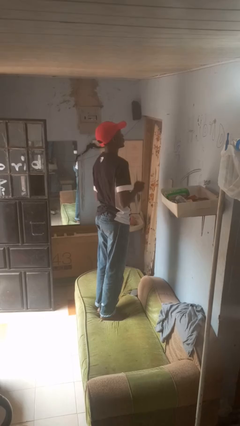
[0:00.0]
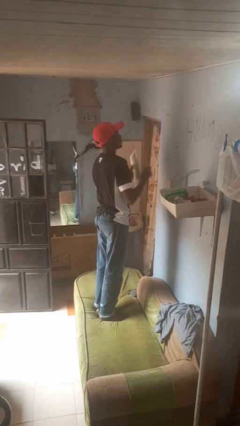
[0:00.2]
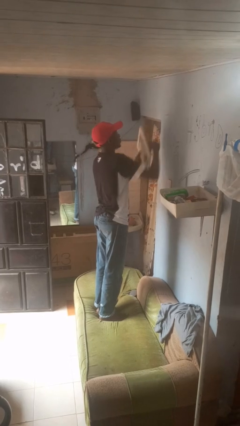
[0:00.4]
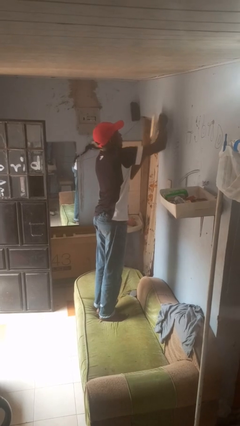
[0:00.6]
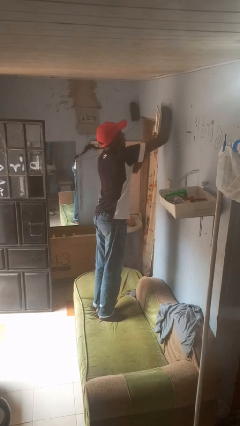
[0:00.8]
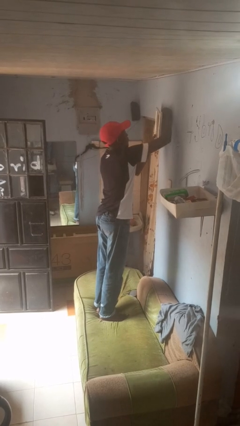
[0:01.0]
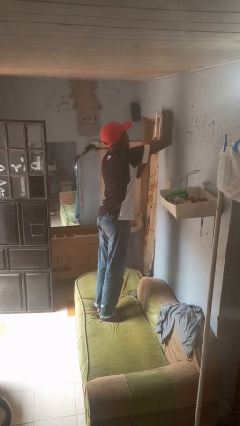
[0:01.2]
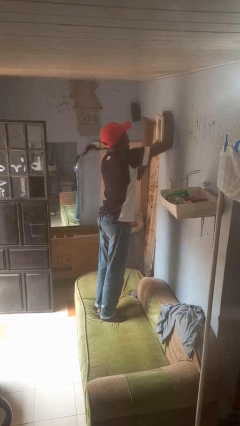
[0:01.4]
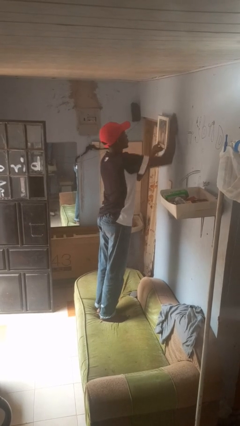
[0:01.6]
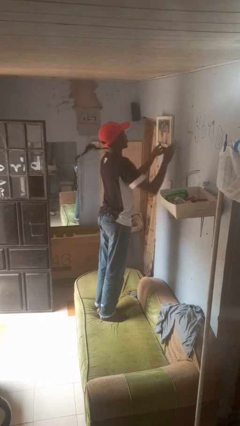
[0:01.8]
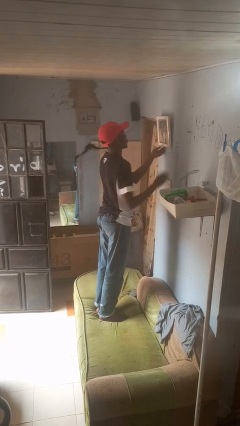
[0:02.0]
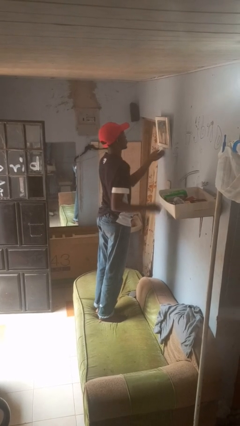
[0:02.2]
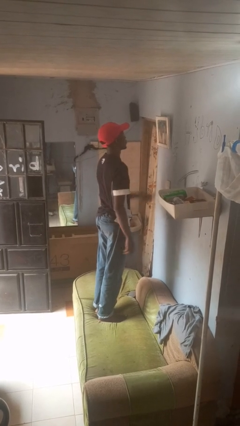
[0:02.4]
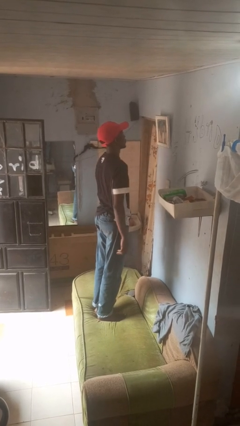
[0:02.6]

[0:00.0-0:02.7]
person puts up picture frame

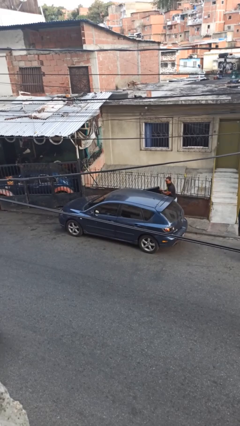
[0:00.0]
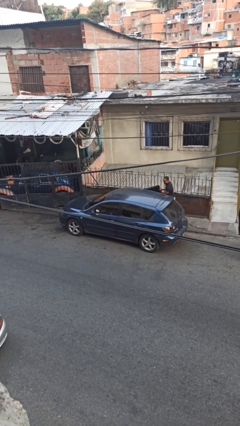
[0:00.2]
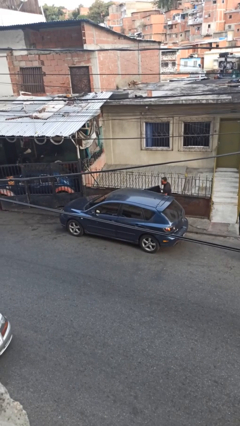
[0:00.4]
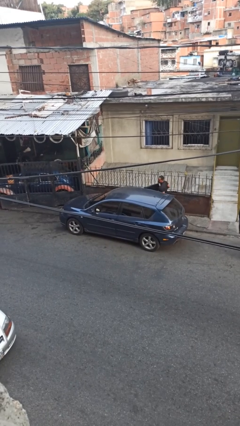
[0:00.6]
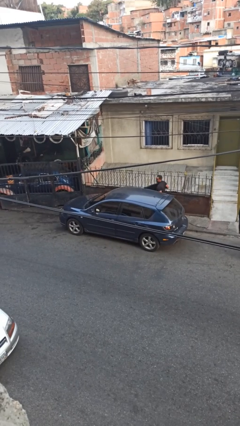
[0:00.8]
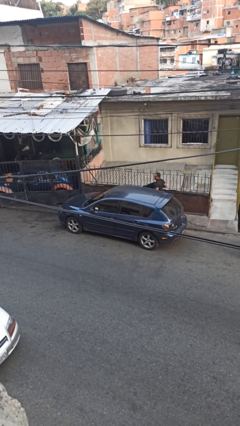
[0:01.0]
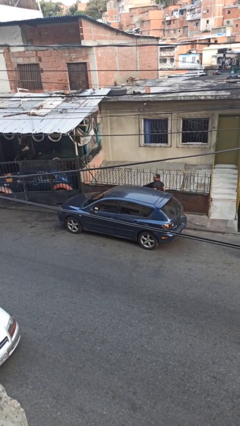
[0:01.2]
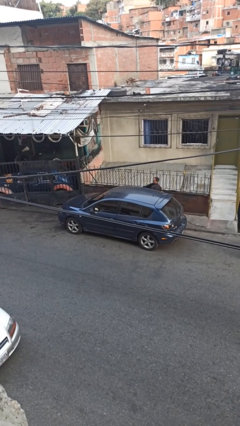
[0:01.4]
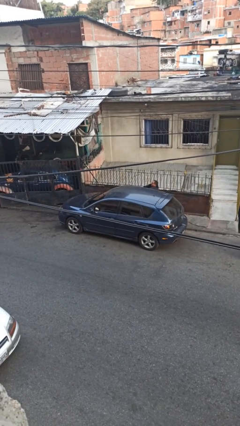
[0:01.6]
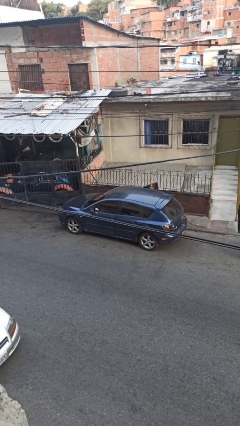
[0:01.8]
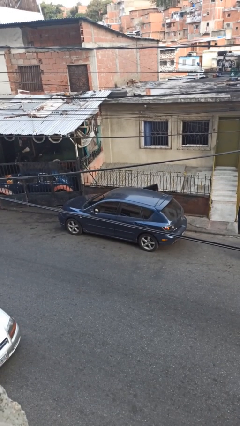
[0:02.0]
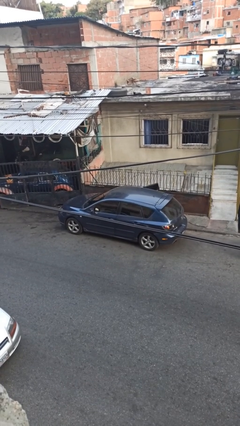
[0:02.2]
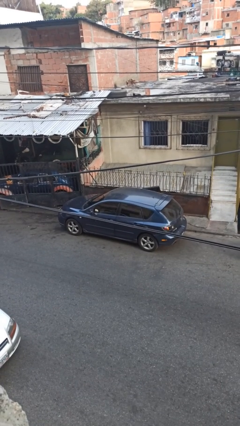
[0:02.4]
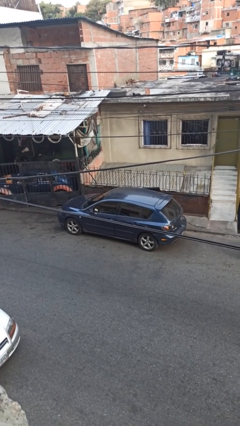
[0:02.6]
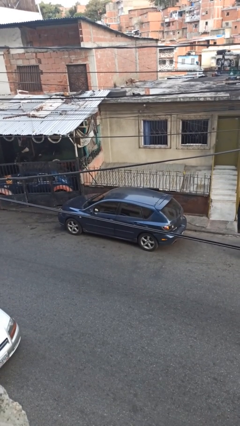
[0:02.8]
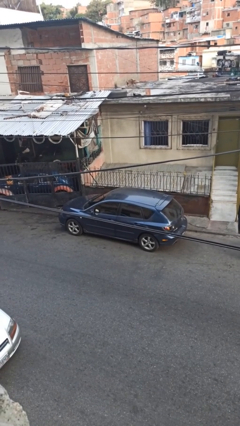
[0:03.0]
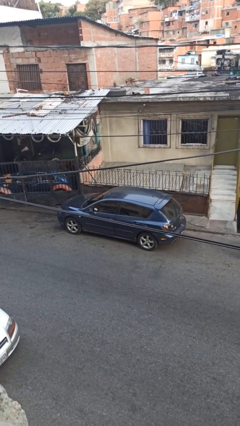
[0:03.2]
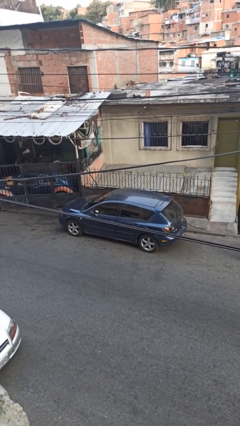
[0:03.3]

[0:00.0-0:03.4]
car picks up person

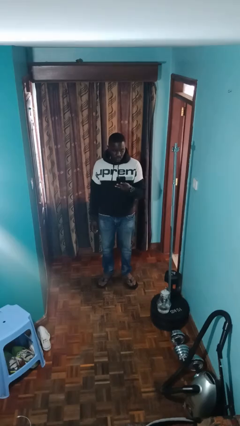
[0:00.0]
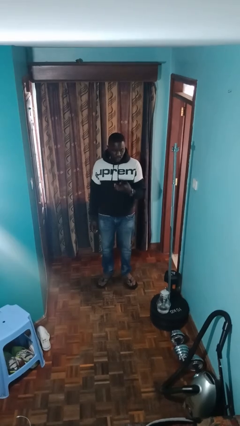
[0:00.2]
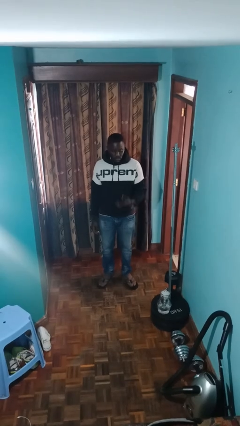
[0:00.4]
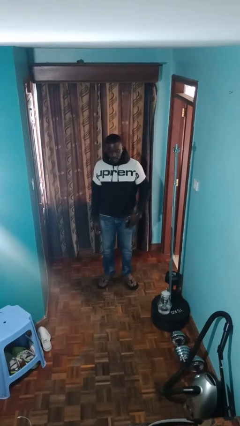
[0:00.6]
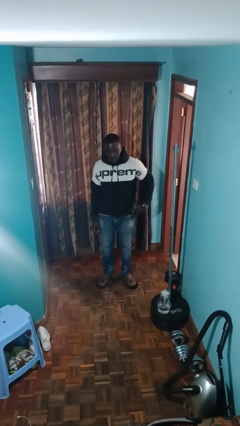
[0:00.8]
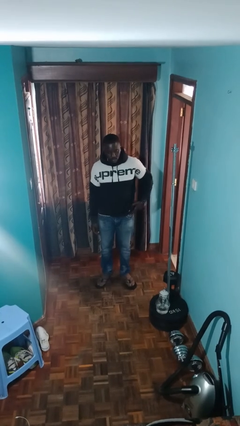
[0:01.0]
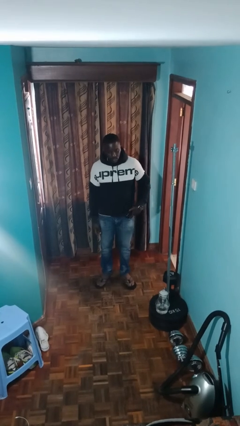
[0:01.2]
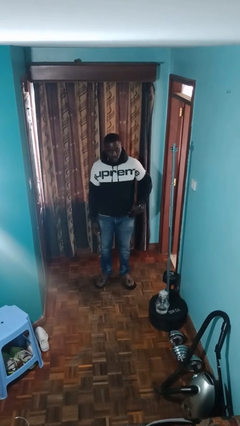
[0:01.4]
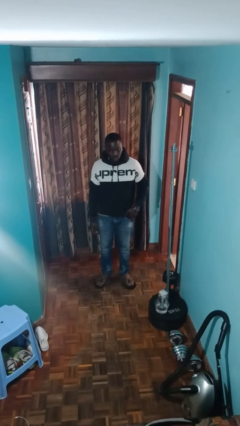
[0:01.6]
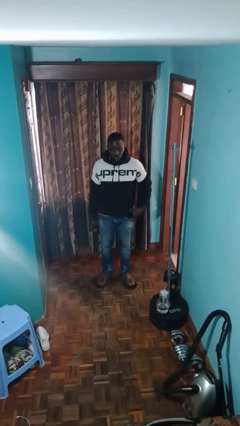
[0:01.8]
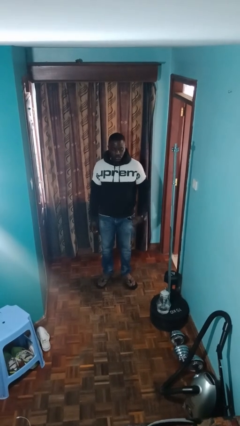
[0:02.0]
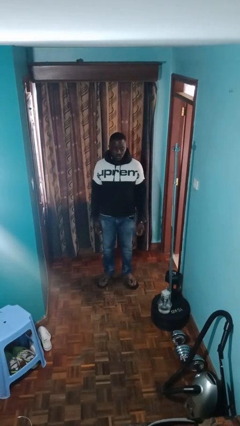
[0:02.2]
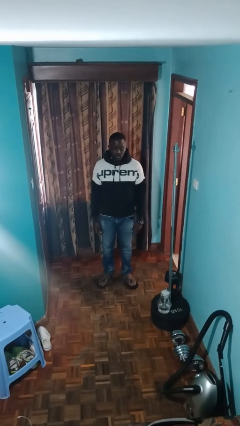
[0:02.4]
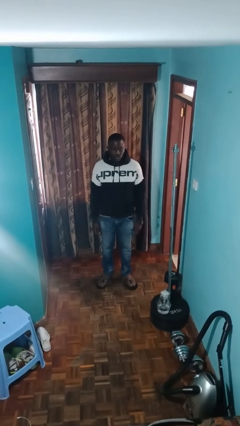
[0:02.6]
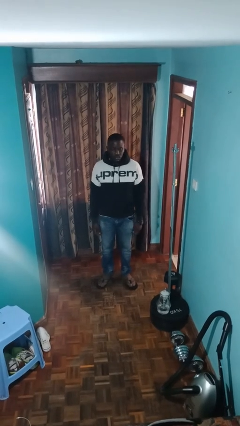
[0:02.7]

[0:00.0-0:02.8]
person puts phone into pocket

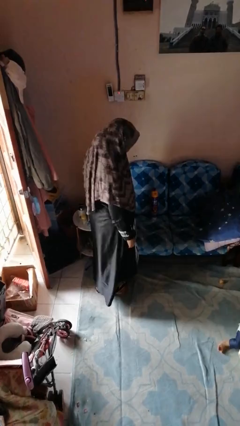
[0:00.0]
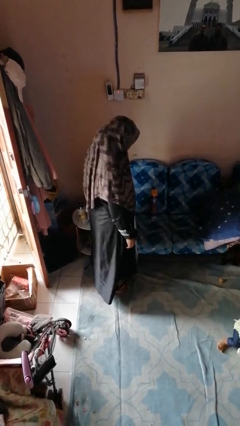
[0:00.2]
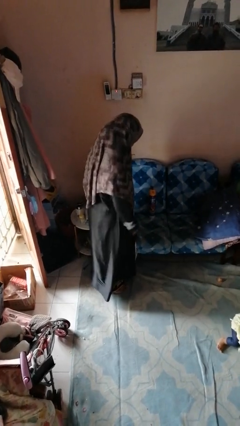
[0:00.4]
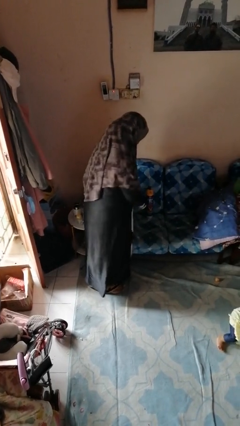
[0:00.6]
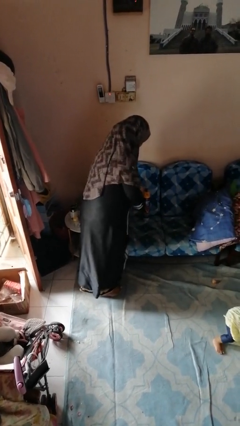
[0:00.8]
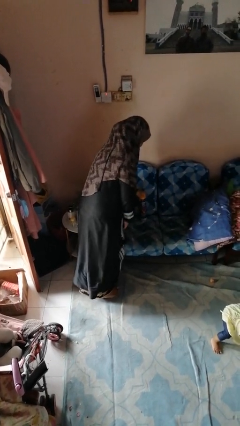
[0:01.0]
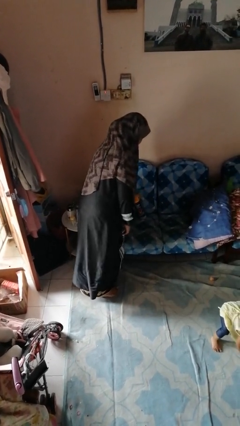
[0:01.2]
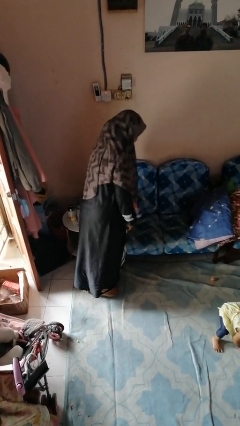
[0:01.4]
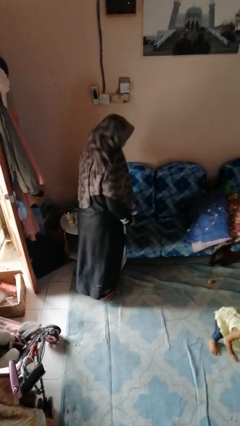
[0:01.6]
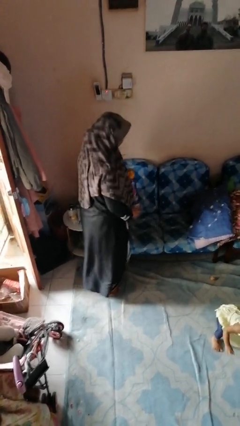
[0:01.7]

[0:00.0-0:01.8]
person picks up object from couch

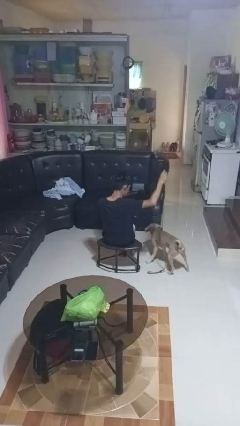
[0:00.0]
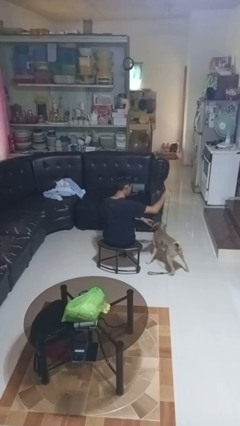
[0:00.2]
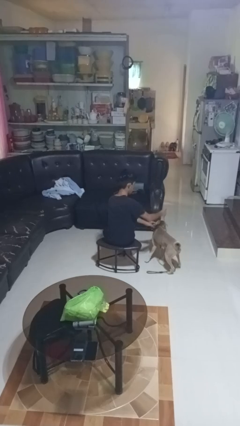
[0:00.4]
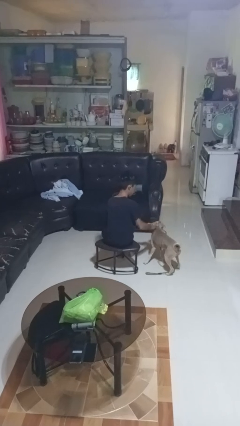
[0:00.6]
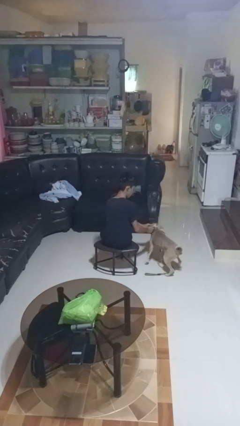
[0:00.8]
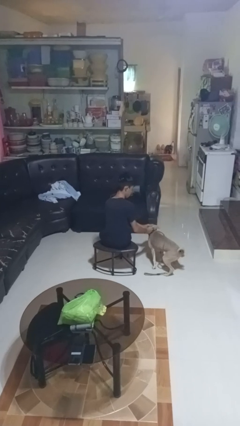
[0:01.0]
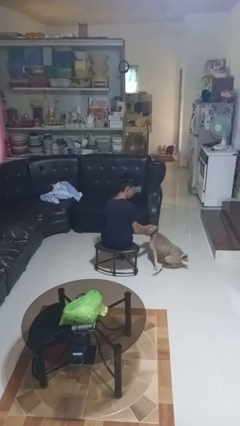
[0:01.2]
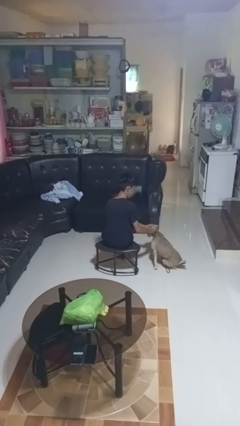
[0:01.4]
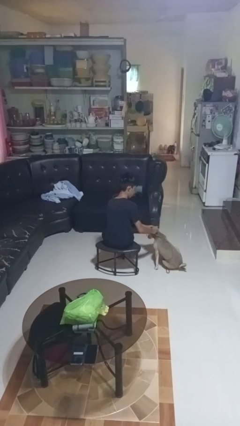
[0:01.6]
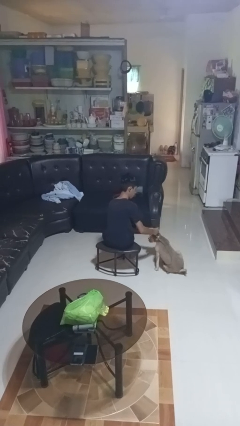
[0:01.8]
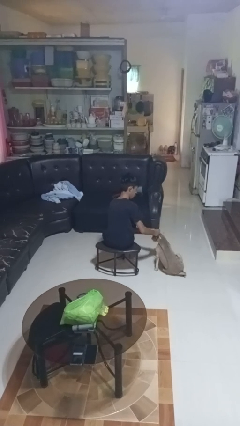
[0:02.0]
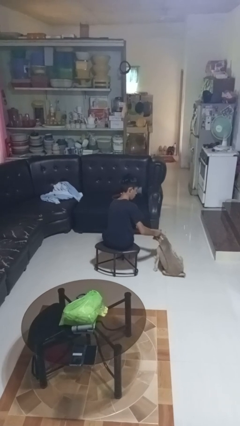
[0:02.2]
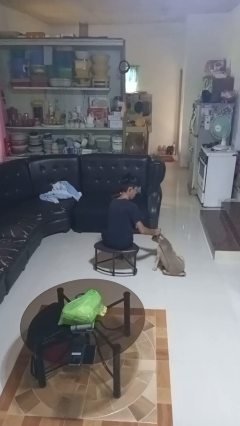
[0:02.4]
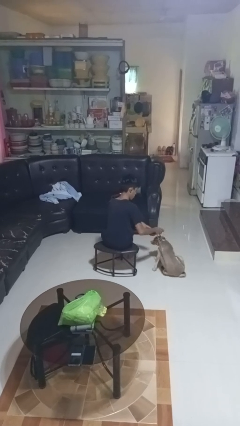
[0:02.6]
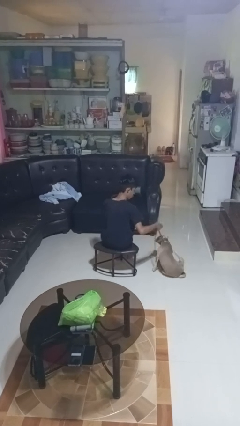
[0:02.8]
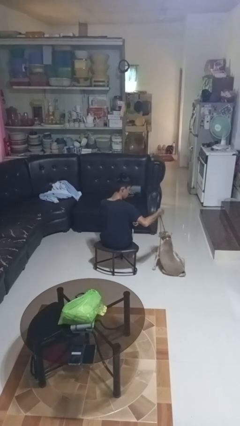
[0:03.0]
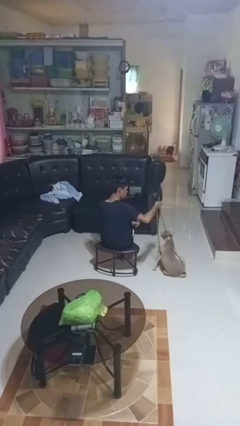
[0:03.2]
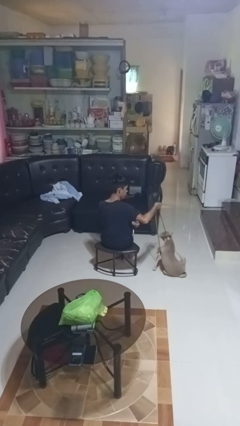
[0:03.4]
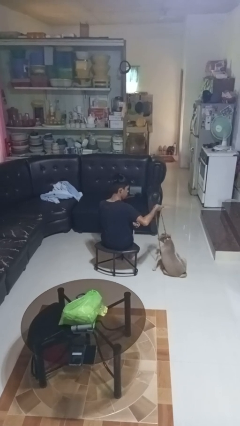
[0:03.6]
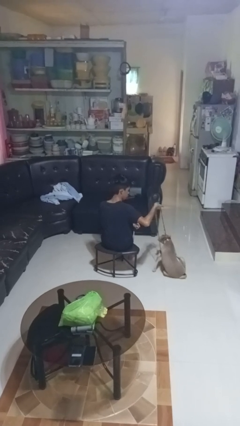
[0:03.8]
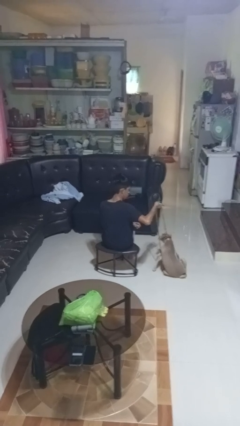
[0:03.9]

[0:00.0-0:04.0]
person attaches leash to dog

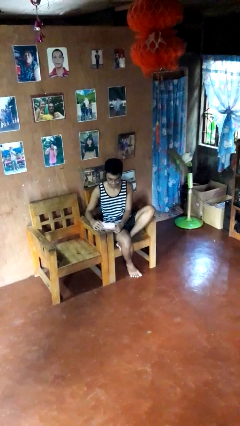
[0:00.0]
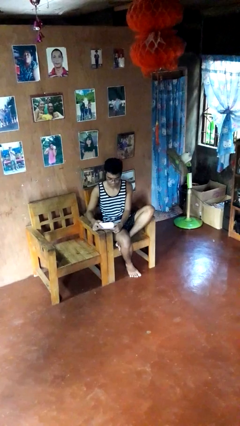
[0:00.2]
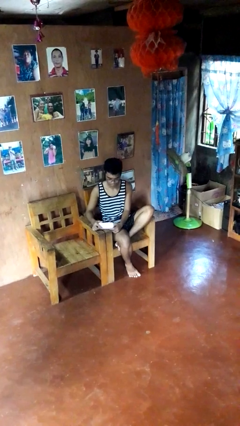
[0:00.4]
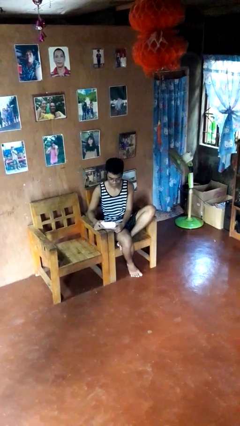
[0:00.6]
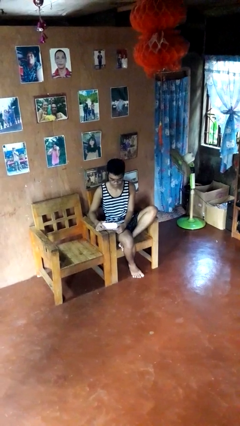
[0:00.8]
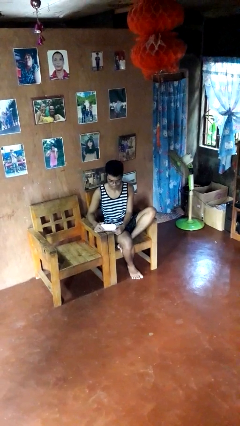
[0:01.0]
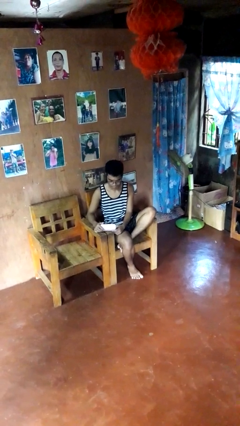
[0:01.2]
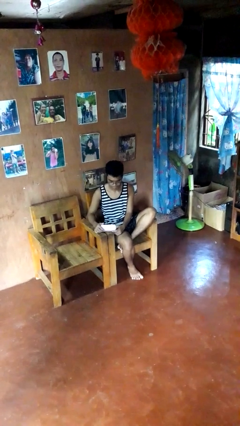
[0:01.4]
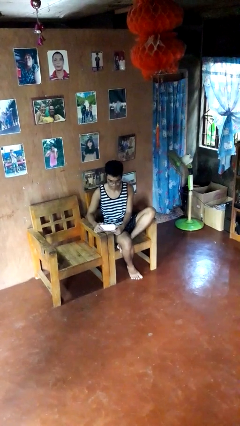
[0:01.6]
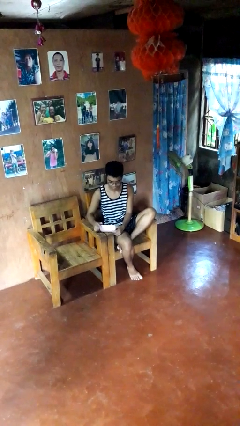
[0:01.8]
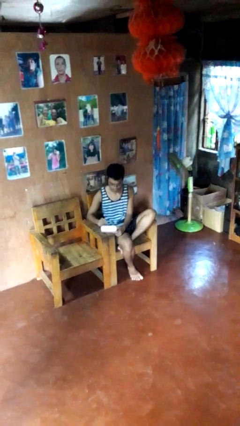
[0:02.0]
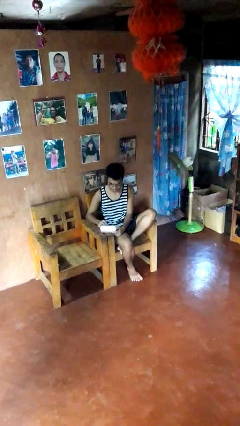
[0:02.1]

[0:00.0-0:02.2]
person opens jewelry box

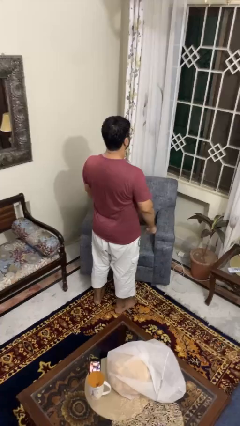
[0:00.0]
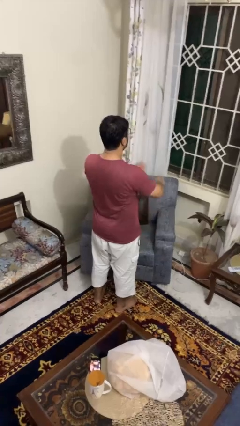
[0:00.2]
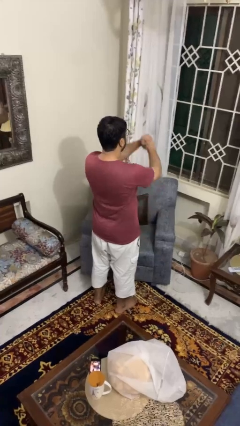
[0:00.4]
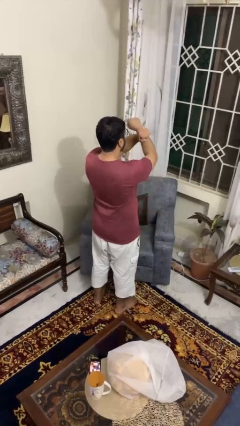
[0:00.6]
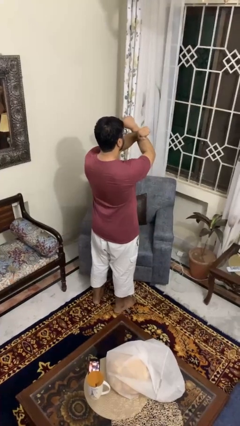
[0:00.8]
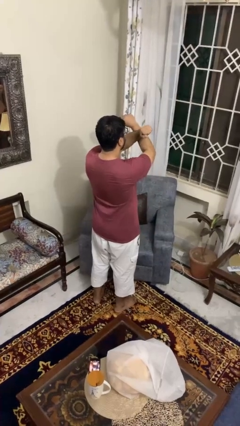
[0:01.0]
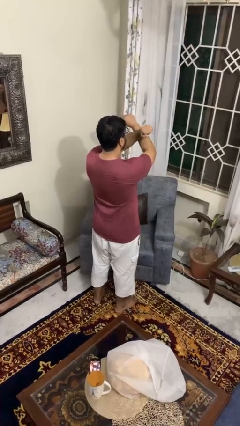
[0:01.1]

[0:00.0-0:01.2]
person gestures arms x
